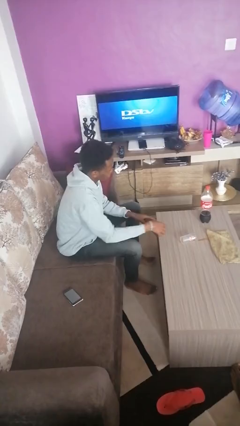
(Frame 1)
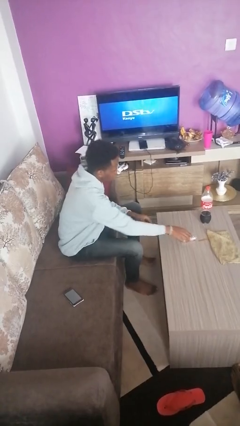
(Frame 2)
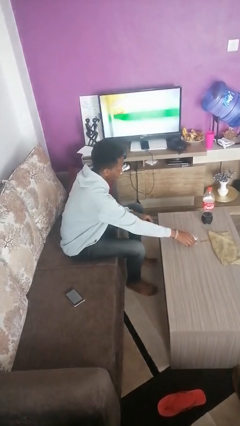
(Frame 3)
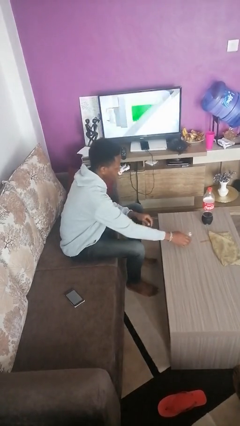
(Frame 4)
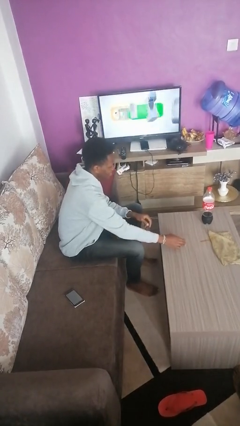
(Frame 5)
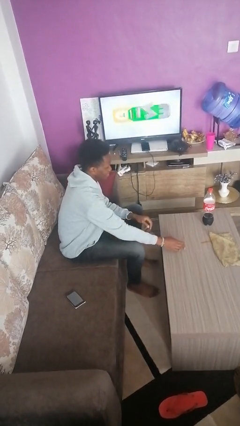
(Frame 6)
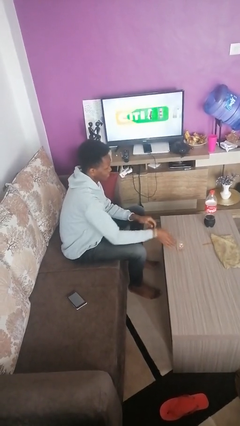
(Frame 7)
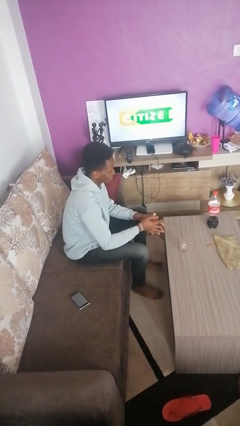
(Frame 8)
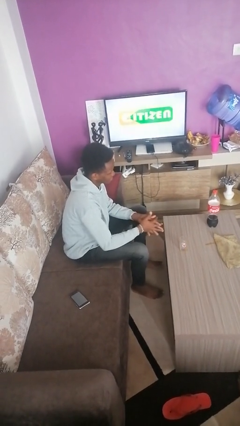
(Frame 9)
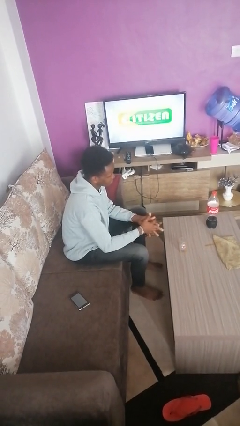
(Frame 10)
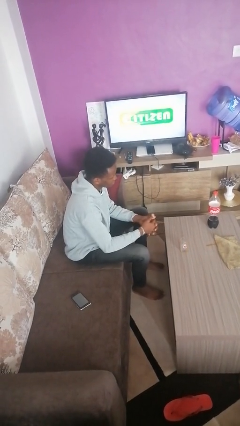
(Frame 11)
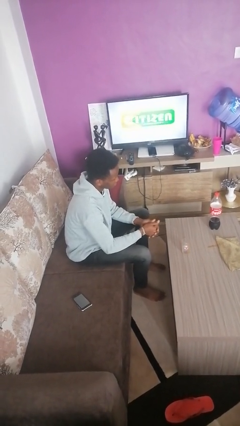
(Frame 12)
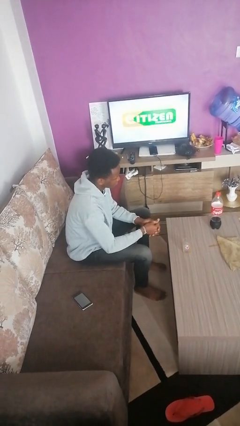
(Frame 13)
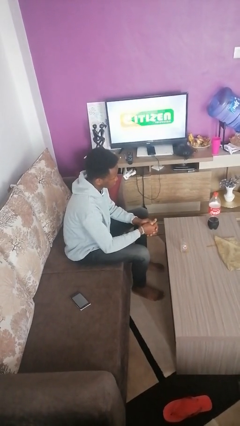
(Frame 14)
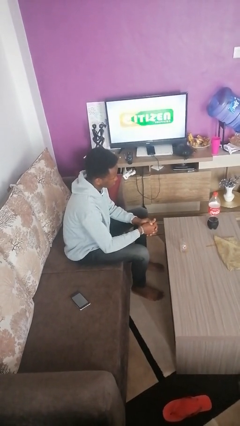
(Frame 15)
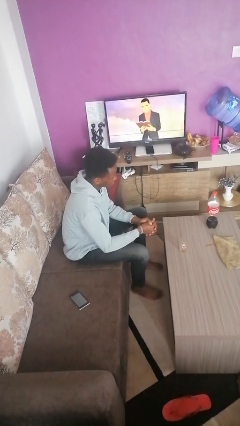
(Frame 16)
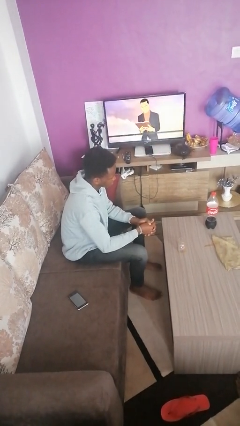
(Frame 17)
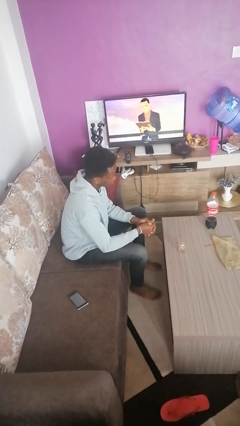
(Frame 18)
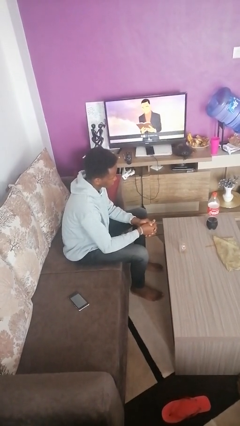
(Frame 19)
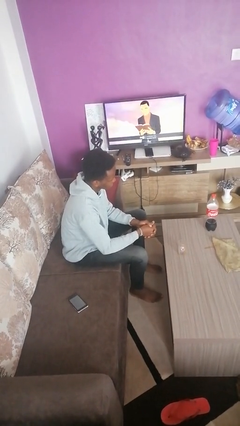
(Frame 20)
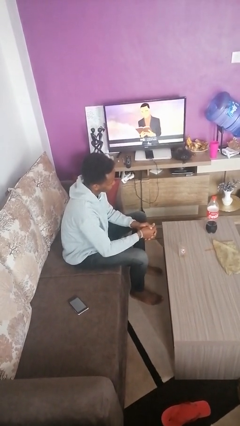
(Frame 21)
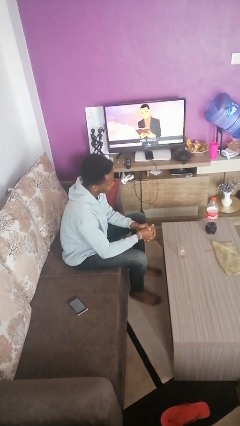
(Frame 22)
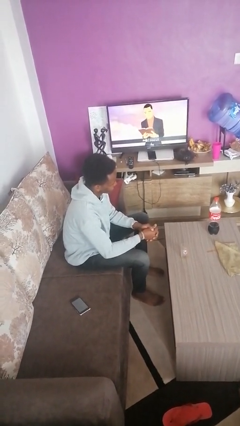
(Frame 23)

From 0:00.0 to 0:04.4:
person sets upright glass

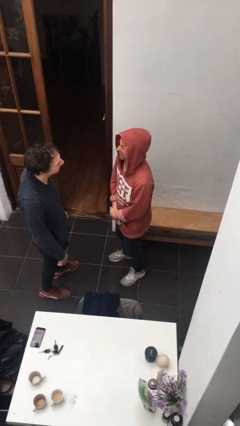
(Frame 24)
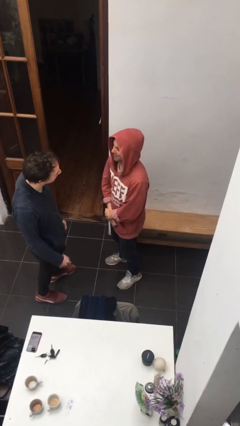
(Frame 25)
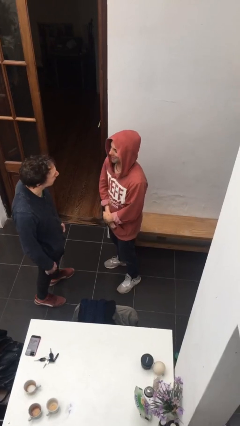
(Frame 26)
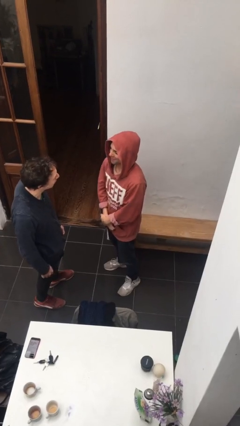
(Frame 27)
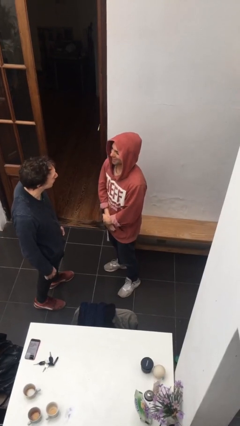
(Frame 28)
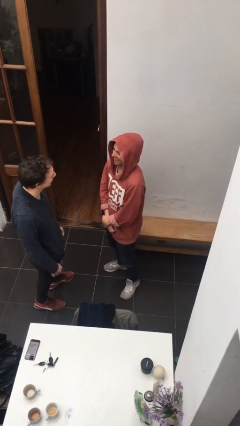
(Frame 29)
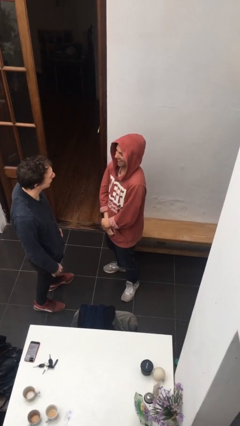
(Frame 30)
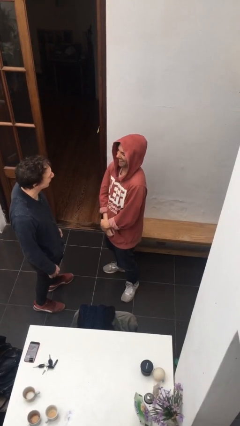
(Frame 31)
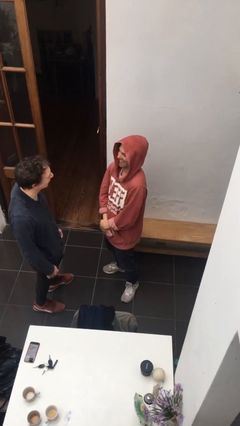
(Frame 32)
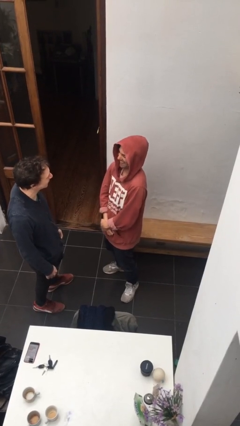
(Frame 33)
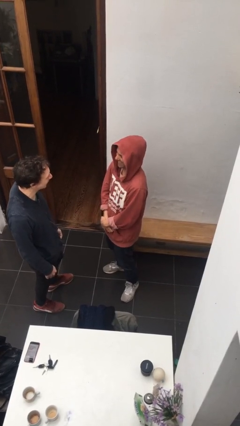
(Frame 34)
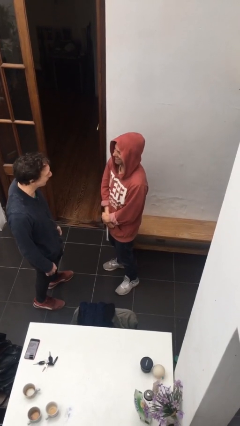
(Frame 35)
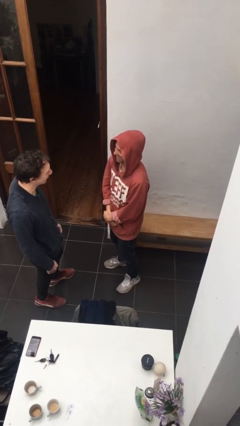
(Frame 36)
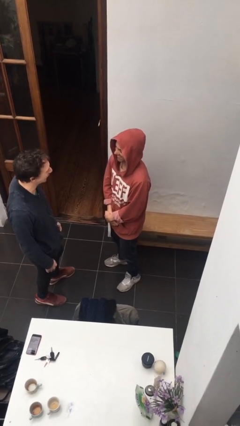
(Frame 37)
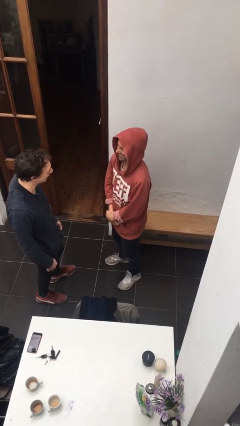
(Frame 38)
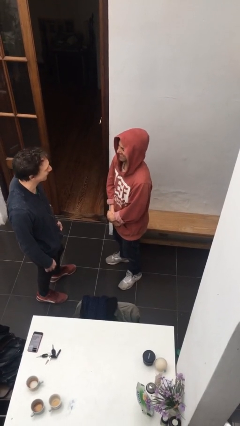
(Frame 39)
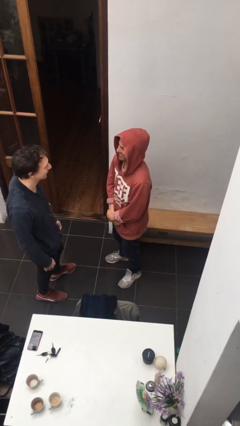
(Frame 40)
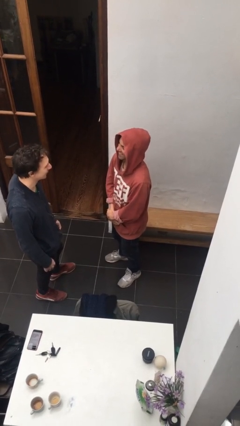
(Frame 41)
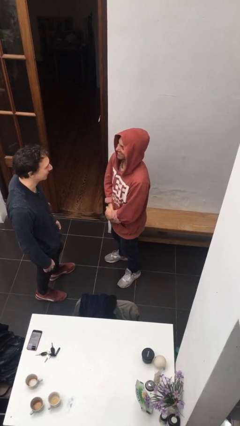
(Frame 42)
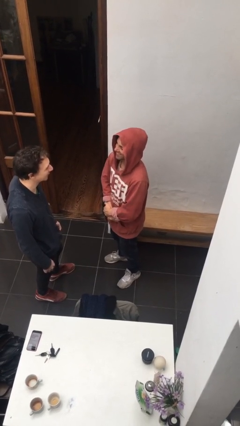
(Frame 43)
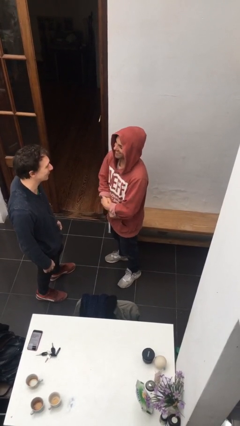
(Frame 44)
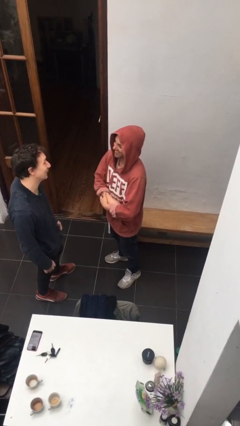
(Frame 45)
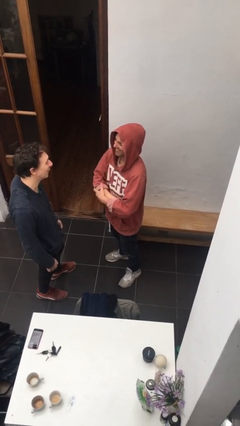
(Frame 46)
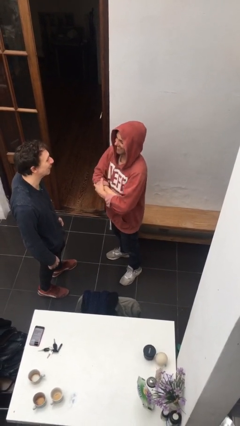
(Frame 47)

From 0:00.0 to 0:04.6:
person talks to person

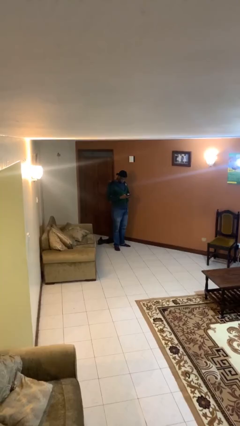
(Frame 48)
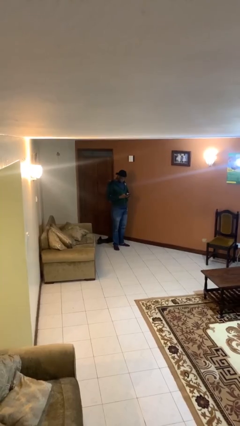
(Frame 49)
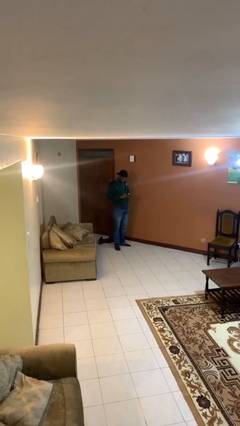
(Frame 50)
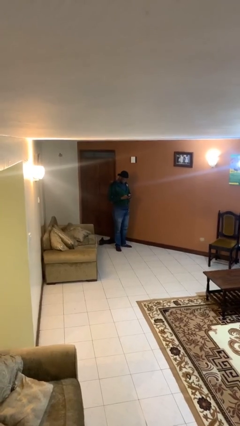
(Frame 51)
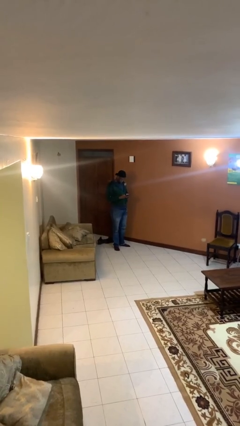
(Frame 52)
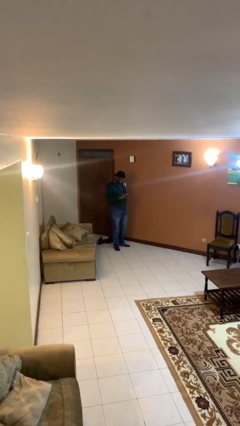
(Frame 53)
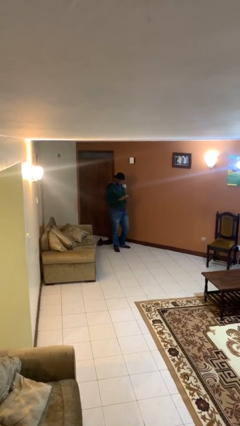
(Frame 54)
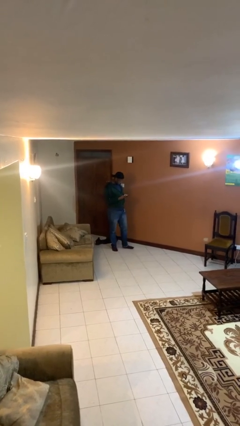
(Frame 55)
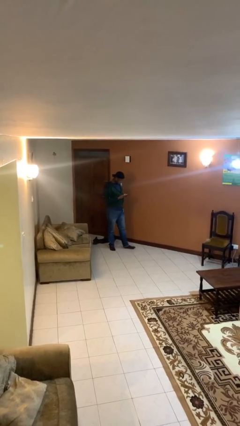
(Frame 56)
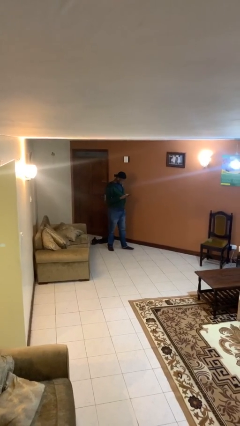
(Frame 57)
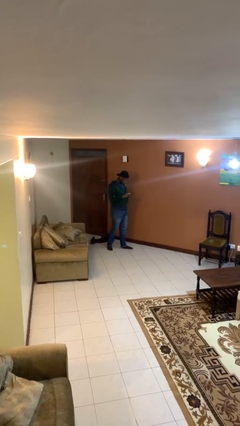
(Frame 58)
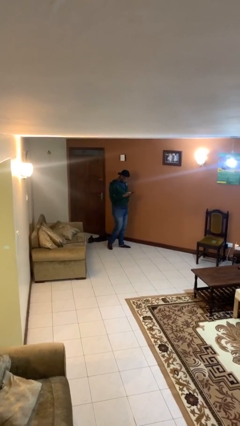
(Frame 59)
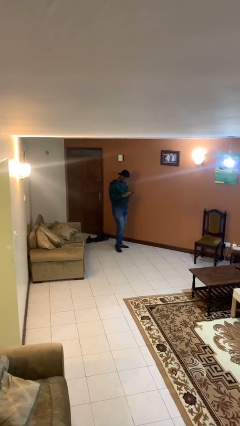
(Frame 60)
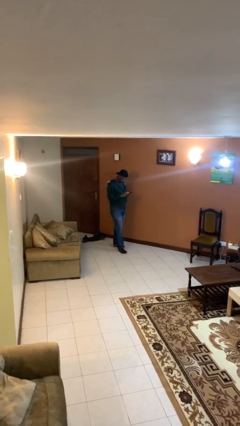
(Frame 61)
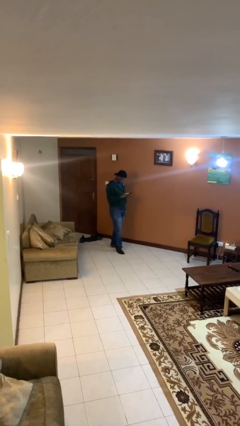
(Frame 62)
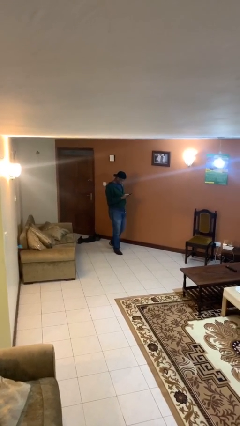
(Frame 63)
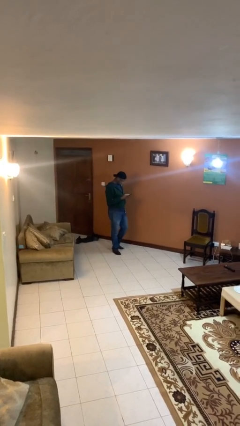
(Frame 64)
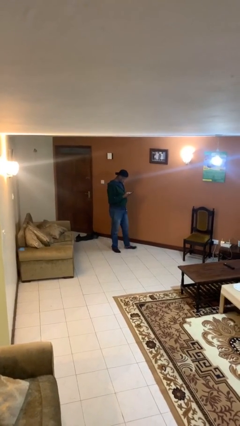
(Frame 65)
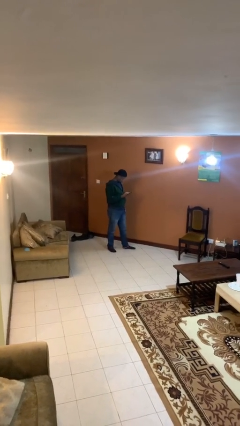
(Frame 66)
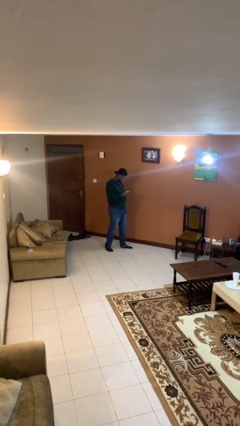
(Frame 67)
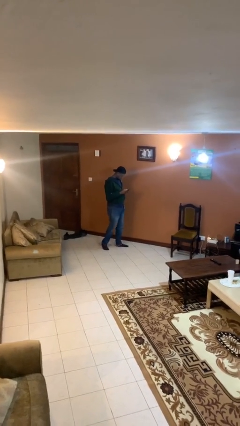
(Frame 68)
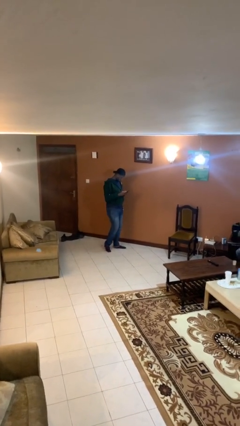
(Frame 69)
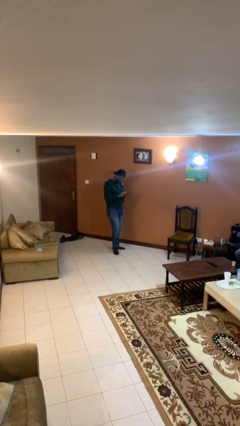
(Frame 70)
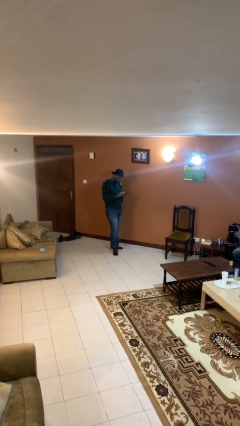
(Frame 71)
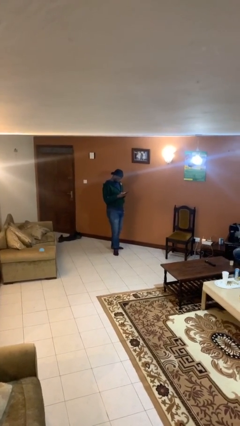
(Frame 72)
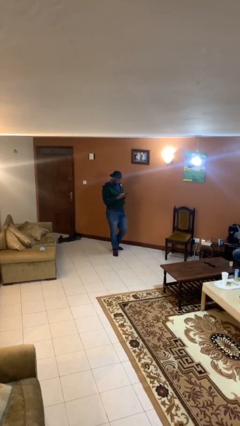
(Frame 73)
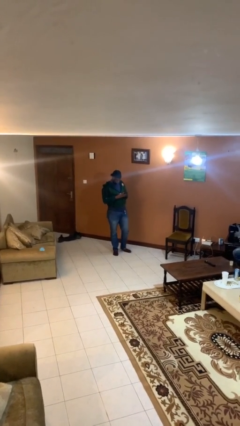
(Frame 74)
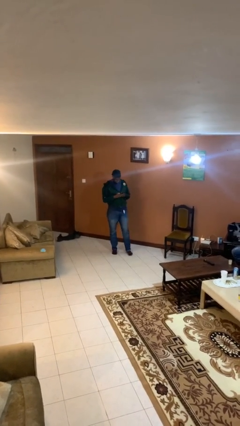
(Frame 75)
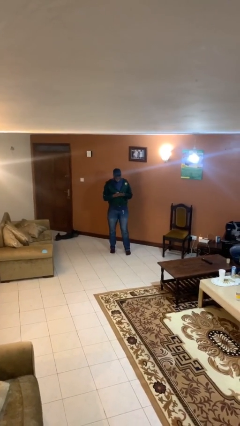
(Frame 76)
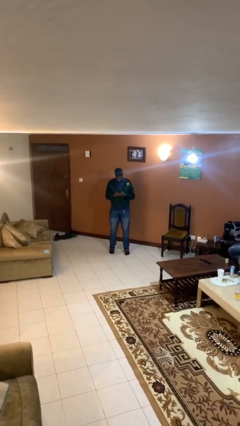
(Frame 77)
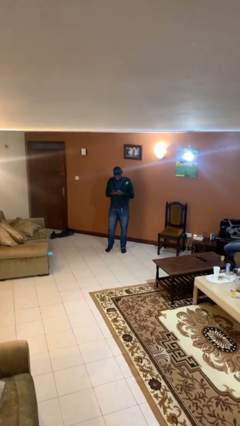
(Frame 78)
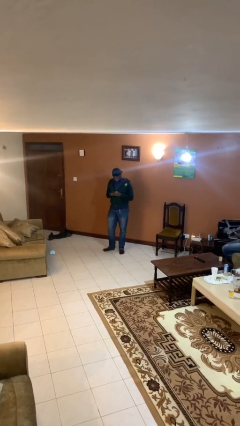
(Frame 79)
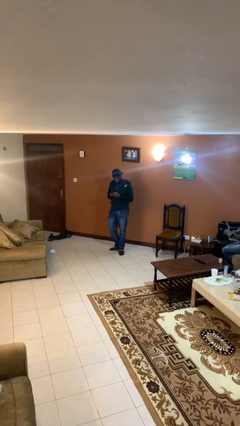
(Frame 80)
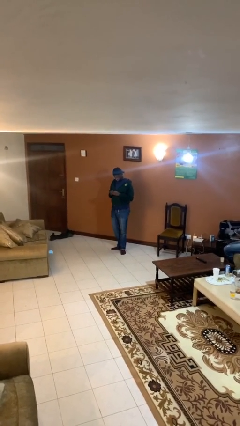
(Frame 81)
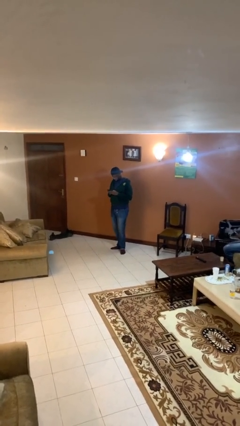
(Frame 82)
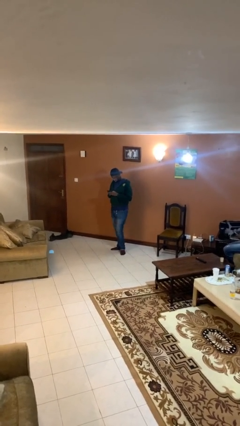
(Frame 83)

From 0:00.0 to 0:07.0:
person texts on phone

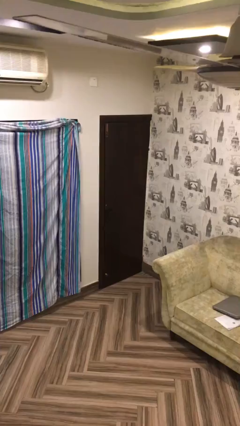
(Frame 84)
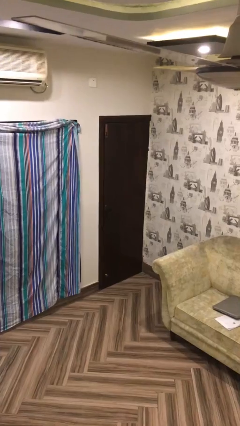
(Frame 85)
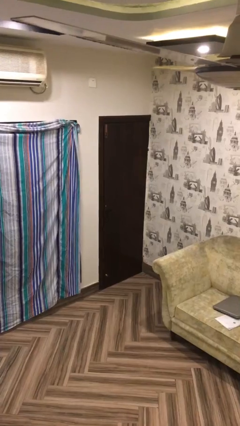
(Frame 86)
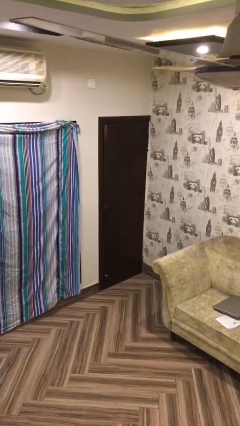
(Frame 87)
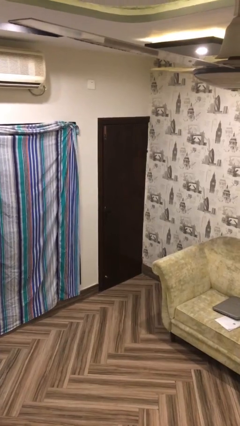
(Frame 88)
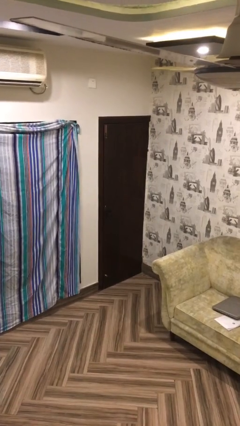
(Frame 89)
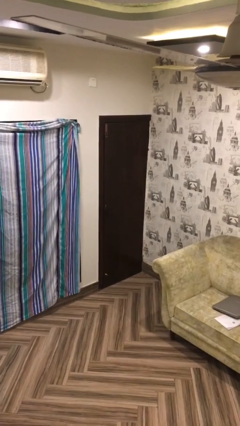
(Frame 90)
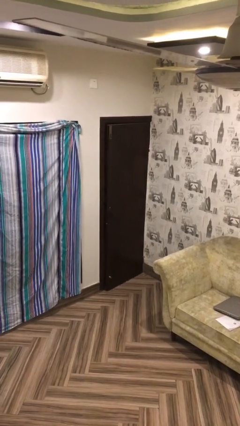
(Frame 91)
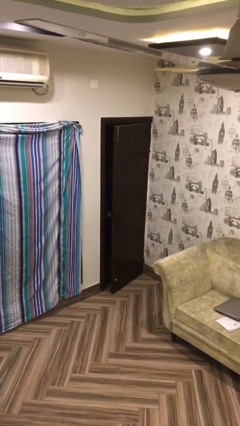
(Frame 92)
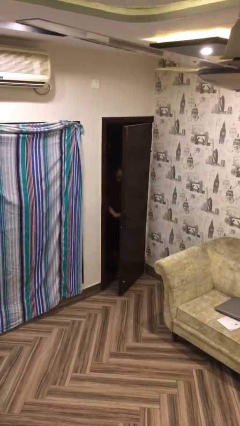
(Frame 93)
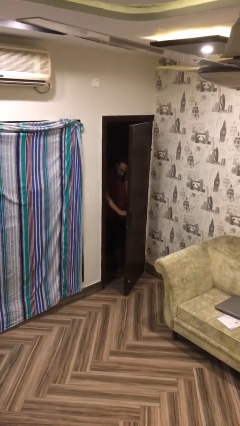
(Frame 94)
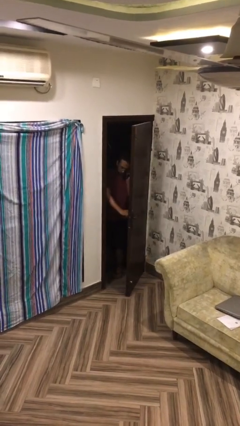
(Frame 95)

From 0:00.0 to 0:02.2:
person opens facility door
